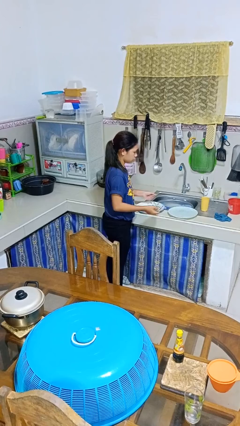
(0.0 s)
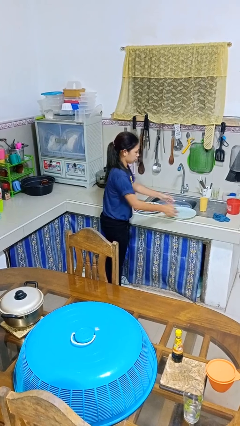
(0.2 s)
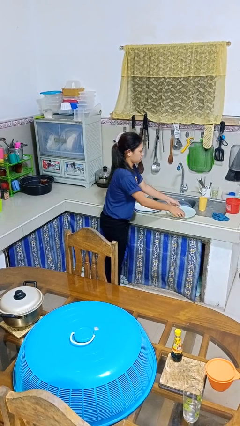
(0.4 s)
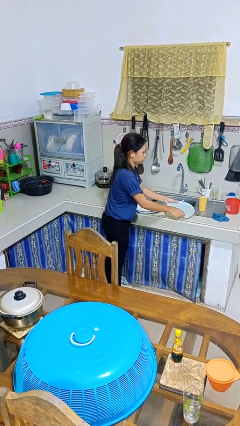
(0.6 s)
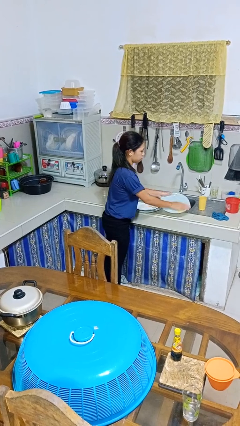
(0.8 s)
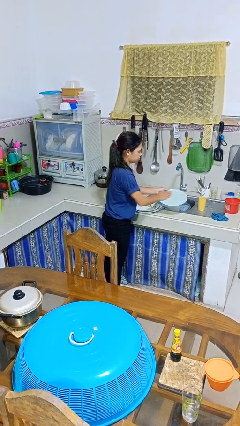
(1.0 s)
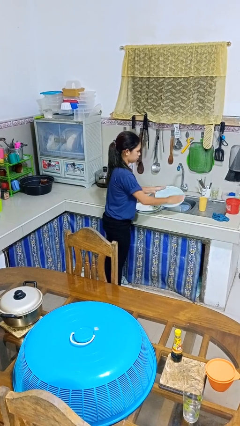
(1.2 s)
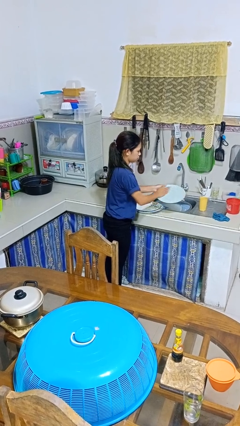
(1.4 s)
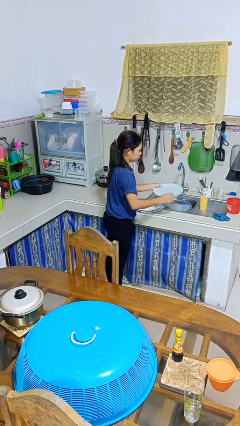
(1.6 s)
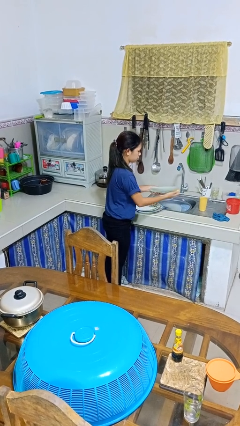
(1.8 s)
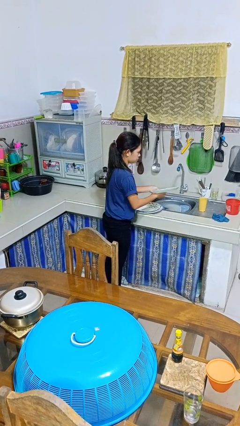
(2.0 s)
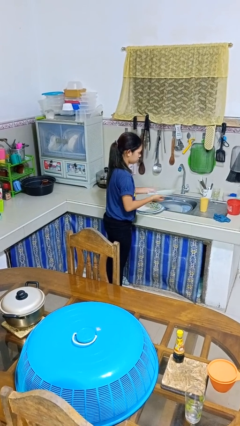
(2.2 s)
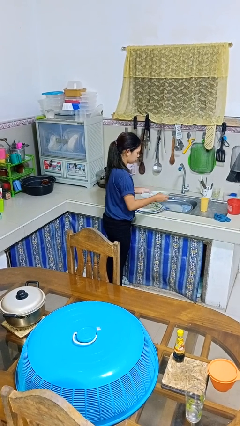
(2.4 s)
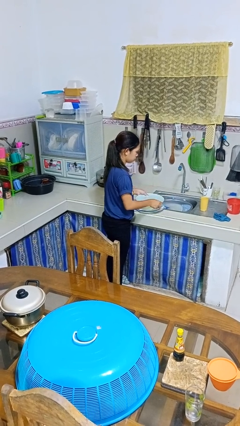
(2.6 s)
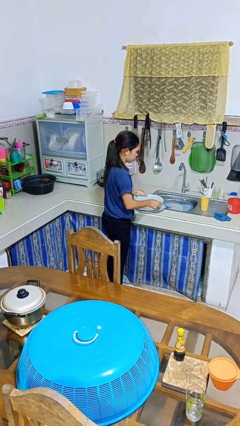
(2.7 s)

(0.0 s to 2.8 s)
person washes dish

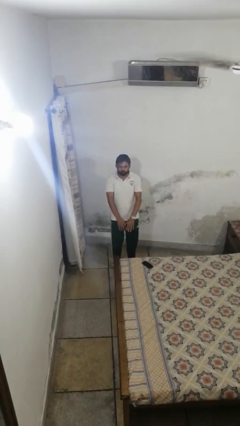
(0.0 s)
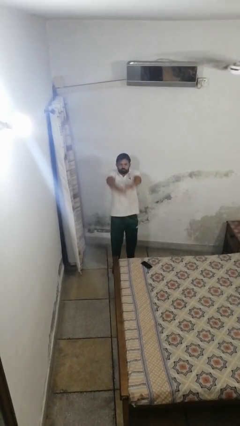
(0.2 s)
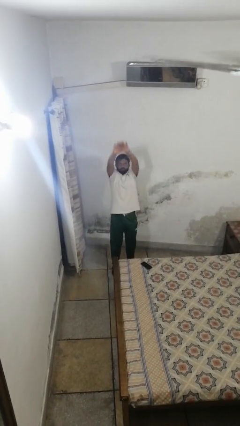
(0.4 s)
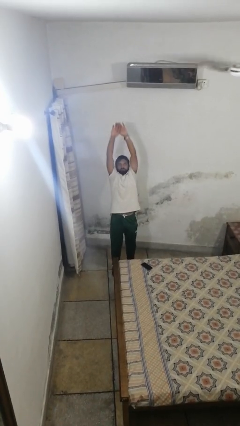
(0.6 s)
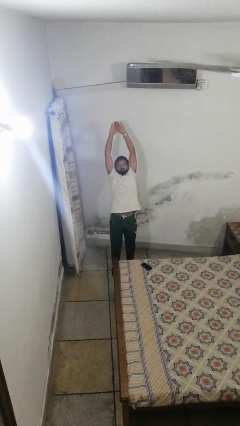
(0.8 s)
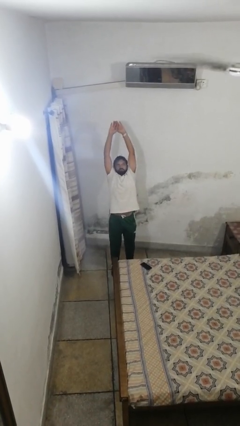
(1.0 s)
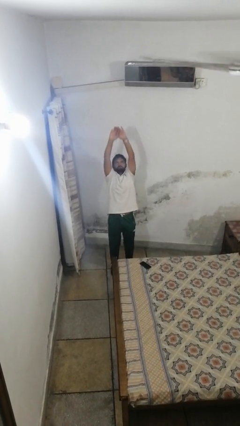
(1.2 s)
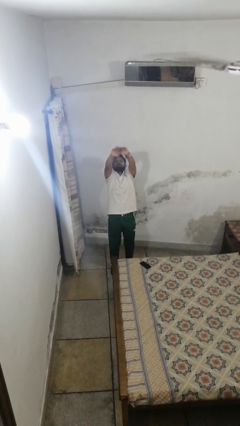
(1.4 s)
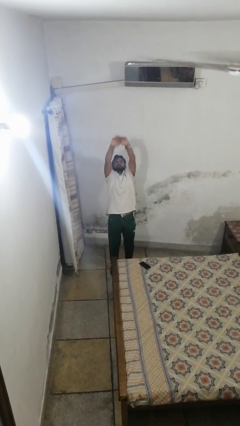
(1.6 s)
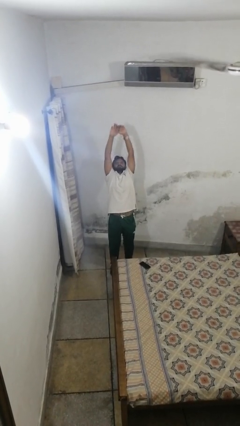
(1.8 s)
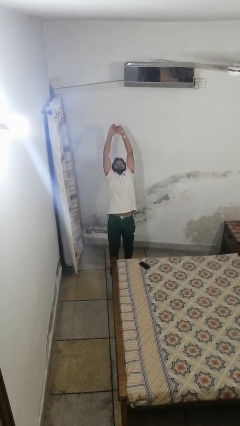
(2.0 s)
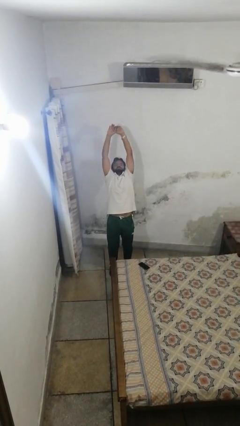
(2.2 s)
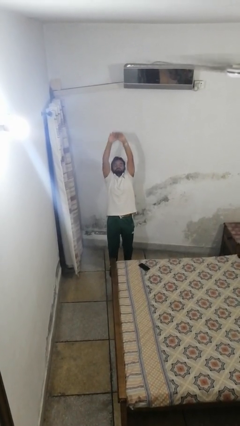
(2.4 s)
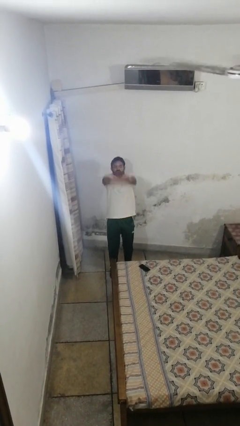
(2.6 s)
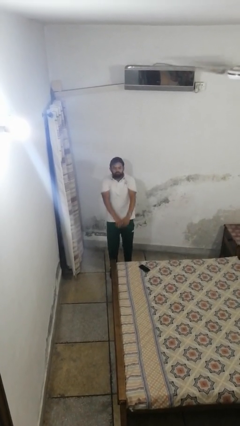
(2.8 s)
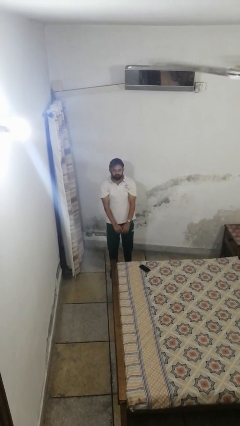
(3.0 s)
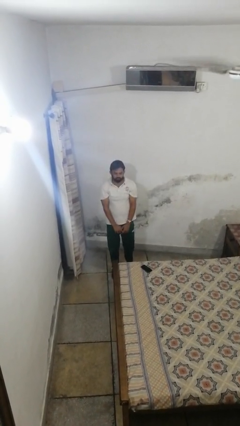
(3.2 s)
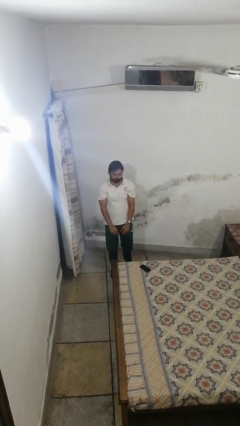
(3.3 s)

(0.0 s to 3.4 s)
person stretches arms over head

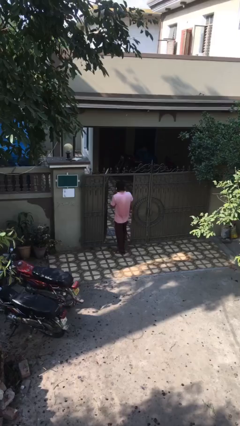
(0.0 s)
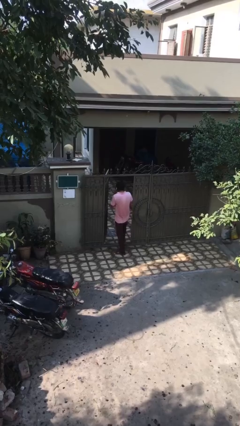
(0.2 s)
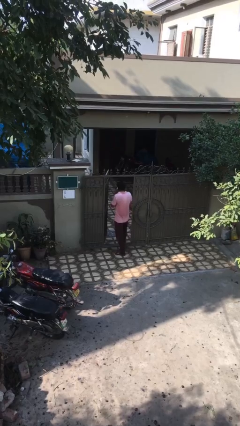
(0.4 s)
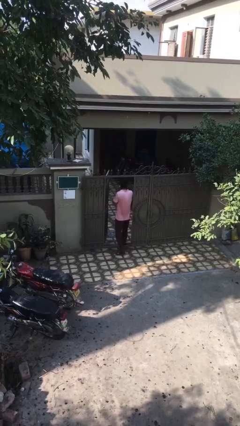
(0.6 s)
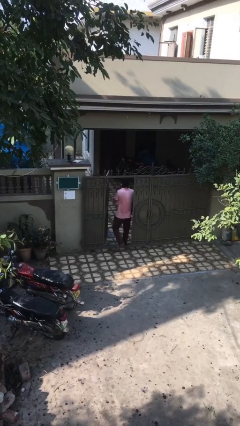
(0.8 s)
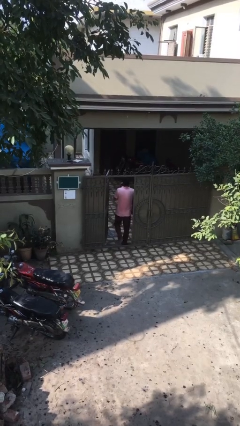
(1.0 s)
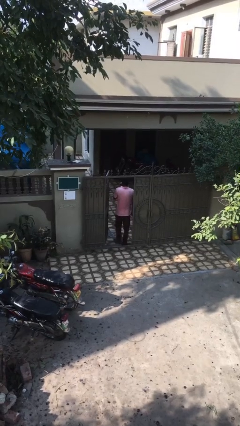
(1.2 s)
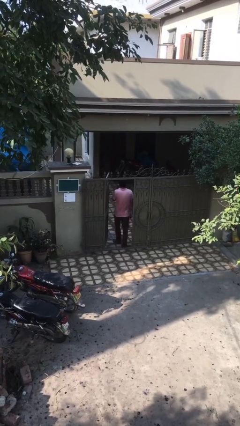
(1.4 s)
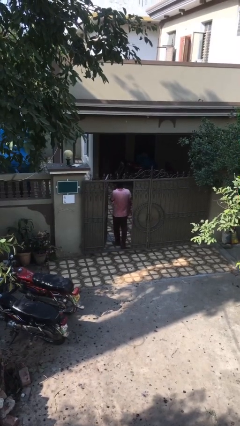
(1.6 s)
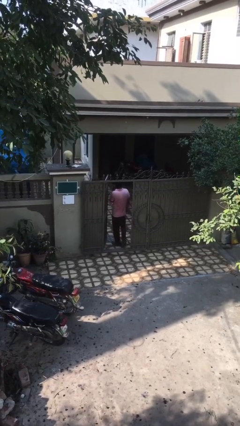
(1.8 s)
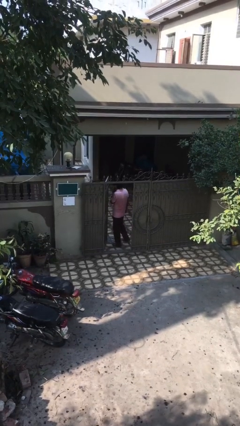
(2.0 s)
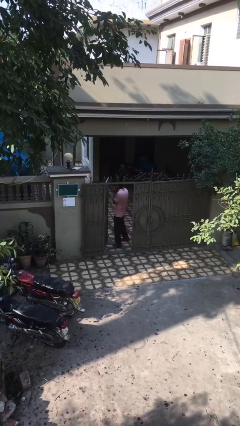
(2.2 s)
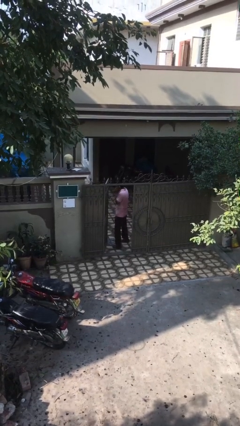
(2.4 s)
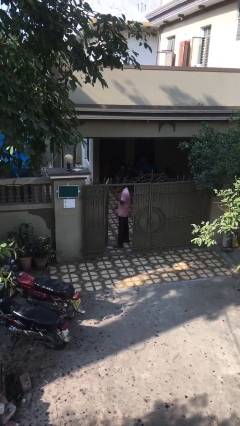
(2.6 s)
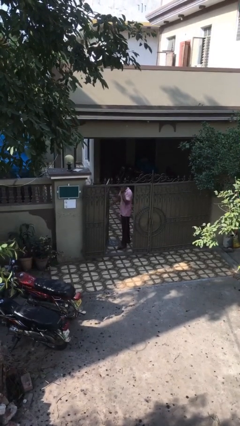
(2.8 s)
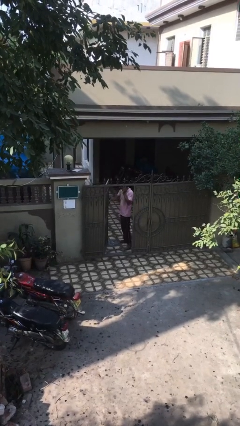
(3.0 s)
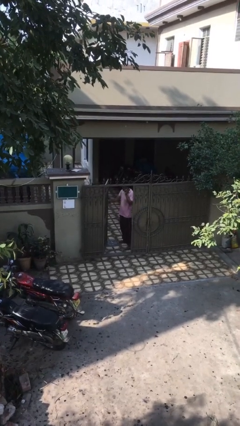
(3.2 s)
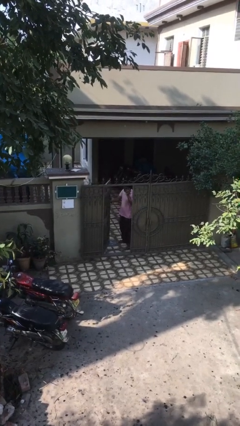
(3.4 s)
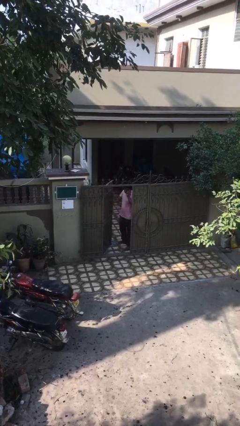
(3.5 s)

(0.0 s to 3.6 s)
person exits scene through structure

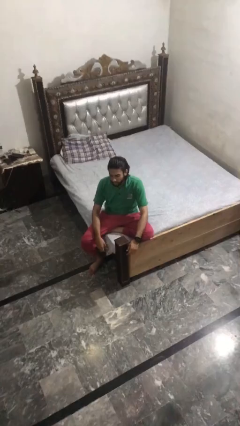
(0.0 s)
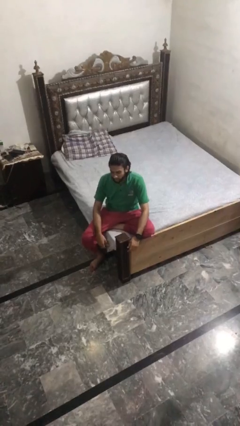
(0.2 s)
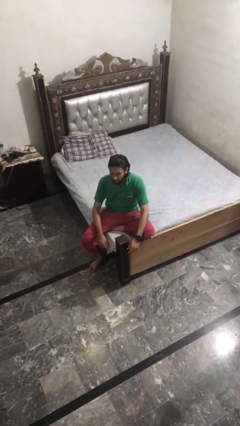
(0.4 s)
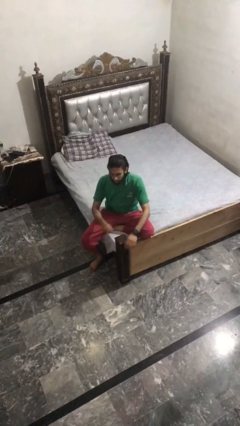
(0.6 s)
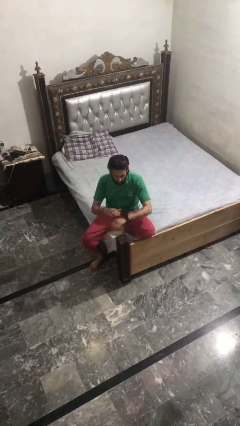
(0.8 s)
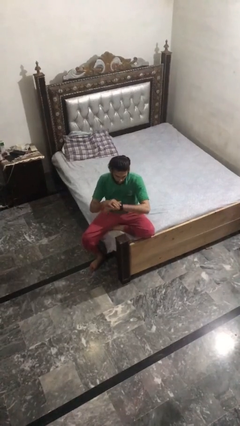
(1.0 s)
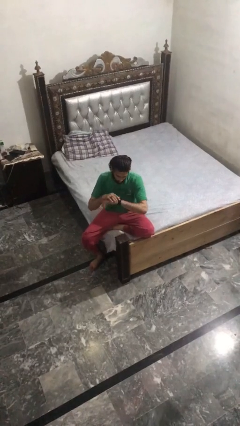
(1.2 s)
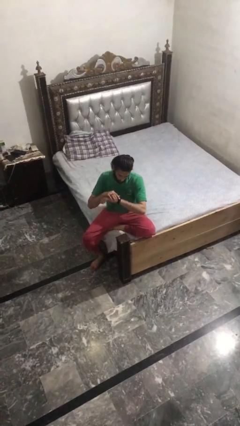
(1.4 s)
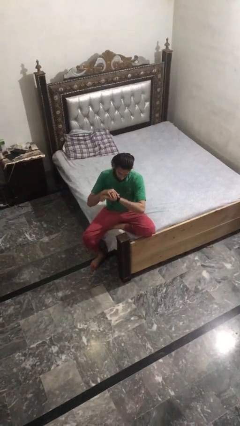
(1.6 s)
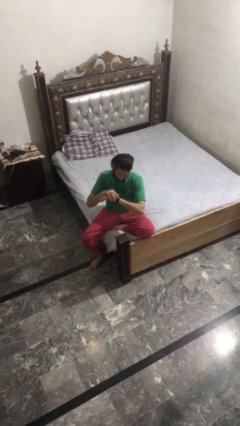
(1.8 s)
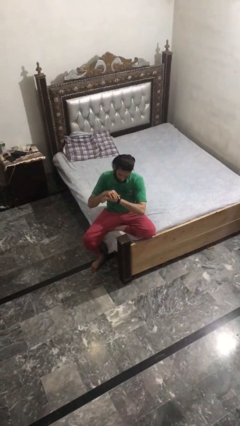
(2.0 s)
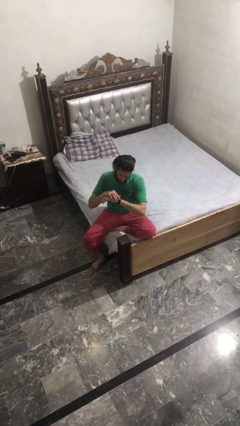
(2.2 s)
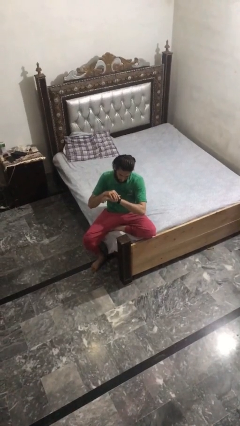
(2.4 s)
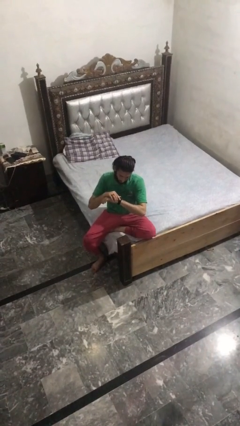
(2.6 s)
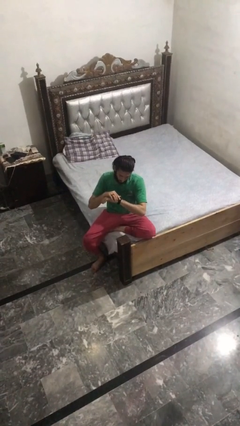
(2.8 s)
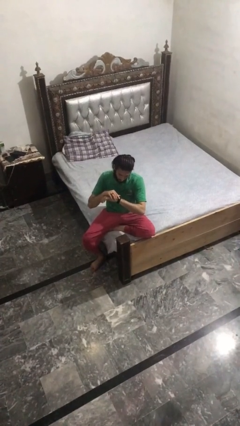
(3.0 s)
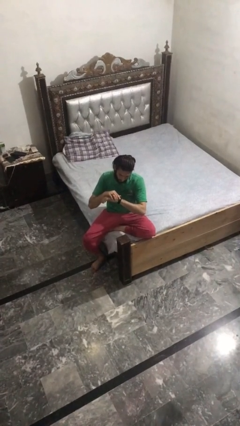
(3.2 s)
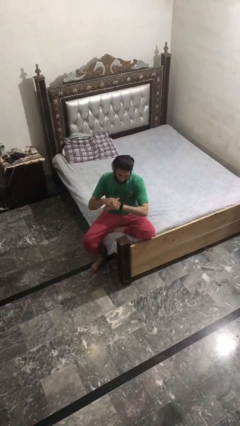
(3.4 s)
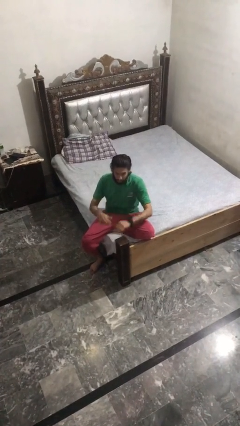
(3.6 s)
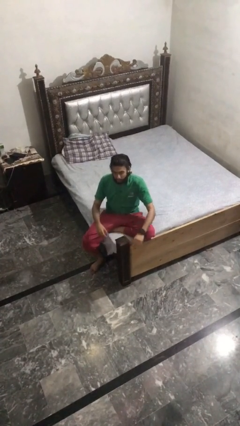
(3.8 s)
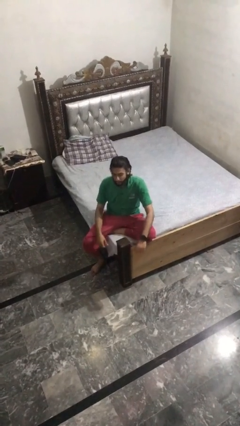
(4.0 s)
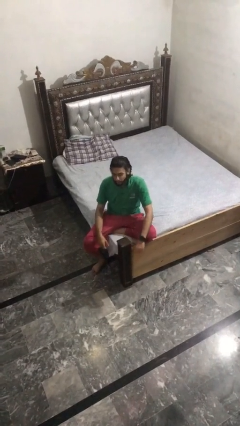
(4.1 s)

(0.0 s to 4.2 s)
person looks at wristwatch

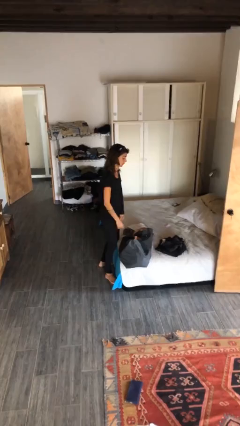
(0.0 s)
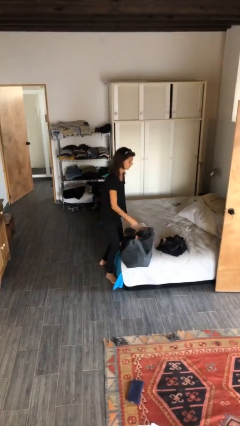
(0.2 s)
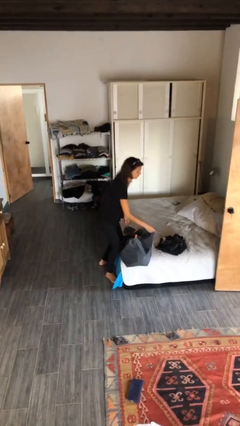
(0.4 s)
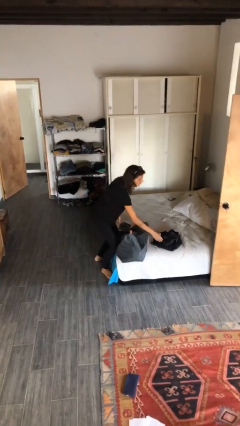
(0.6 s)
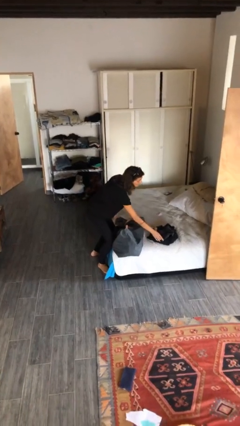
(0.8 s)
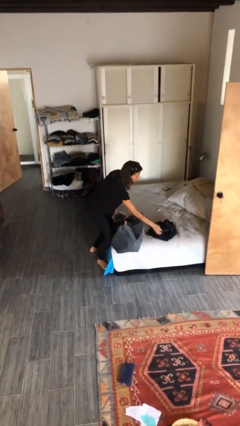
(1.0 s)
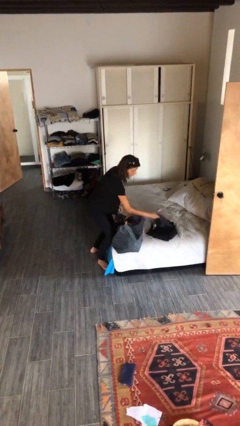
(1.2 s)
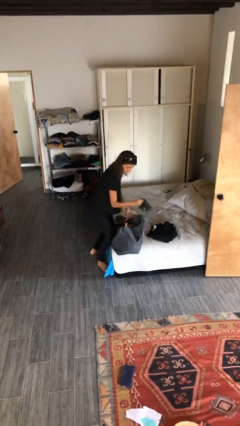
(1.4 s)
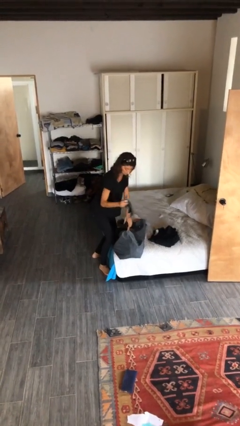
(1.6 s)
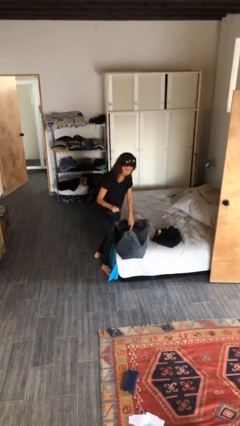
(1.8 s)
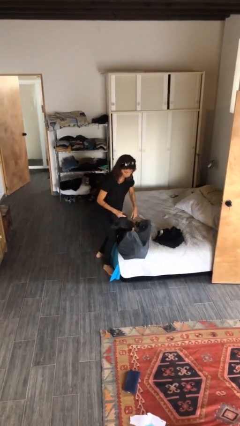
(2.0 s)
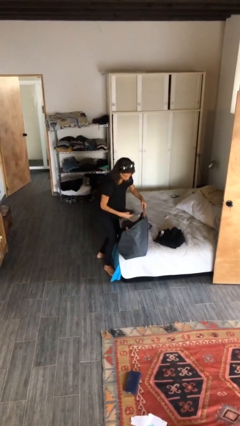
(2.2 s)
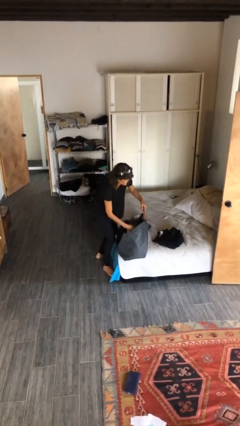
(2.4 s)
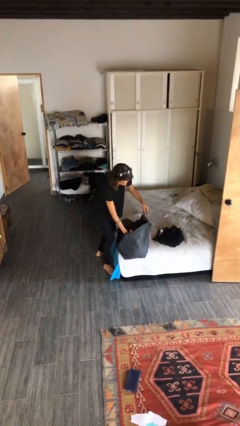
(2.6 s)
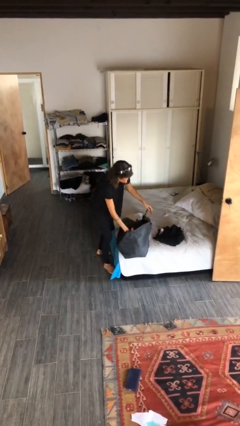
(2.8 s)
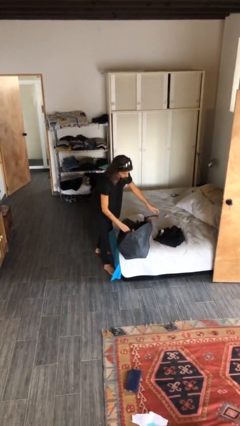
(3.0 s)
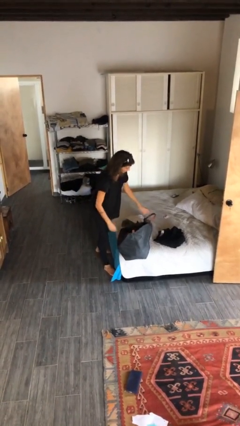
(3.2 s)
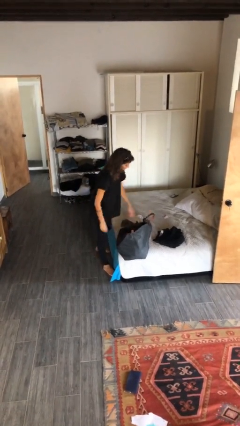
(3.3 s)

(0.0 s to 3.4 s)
person loads clothes into suitcase
